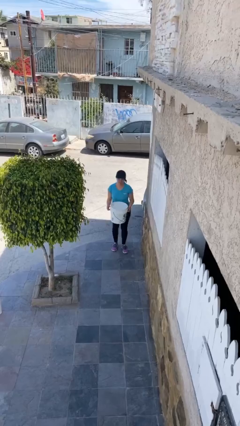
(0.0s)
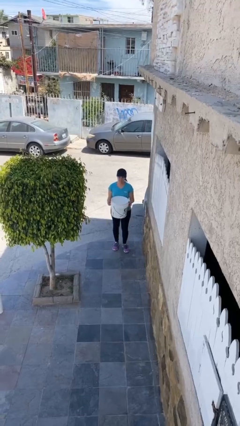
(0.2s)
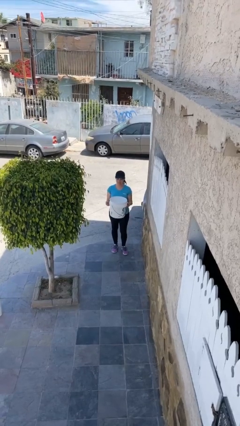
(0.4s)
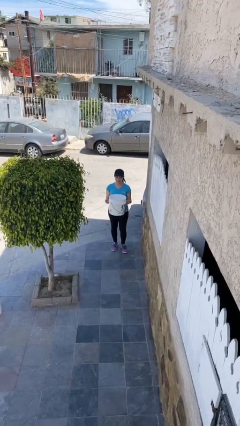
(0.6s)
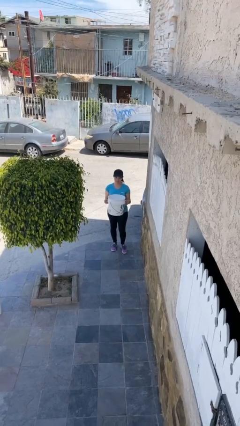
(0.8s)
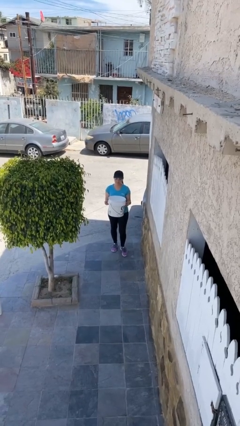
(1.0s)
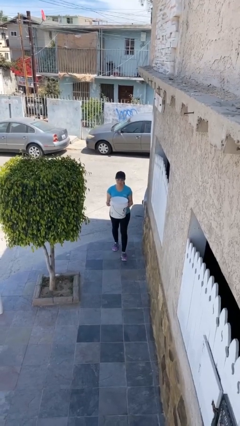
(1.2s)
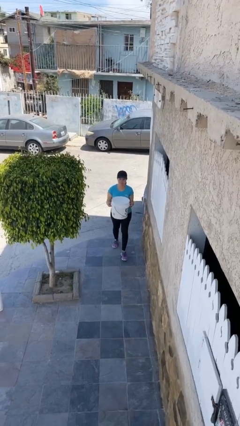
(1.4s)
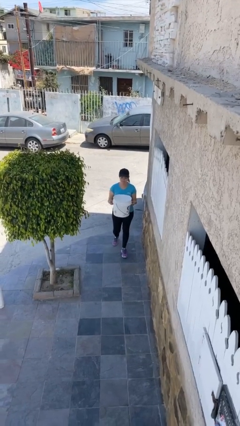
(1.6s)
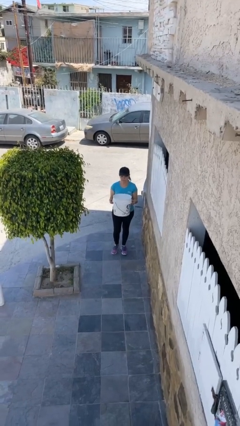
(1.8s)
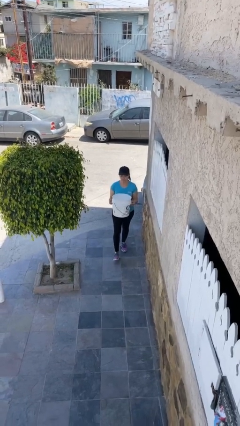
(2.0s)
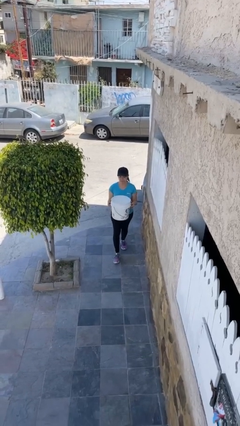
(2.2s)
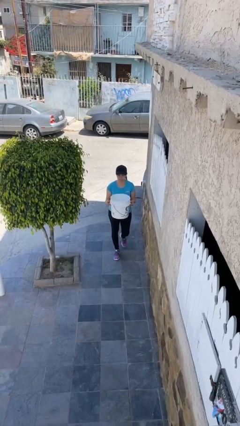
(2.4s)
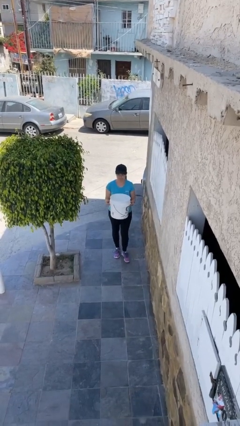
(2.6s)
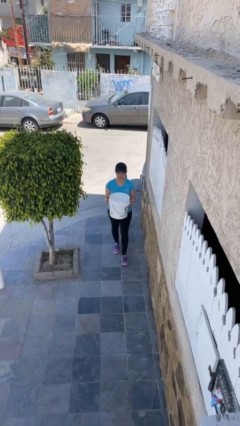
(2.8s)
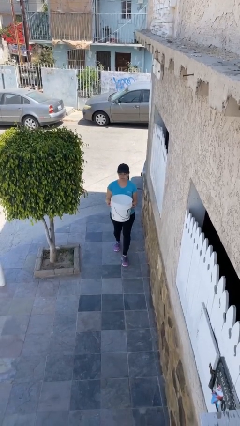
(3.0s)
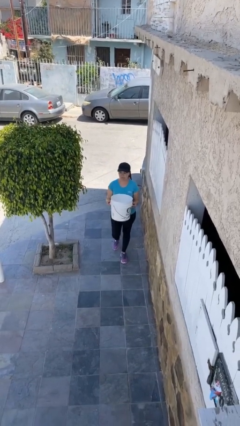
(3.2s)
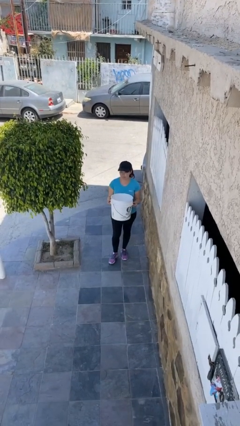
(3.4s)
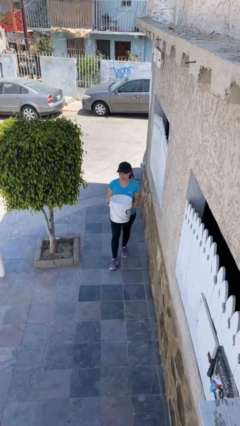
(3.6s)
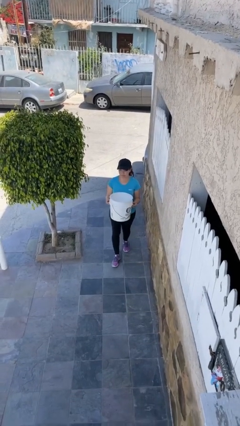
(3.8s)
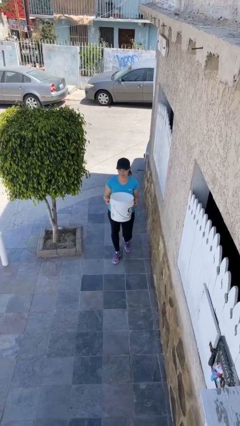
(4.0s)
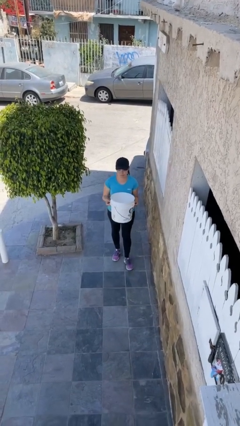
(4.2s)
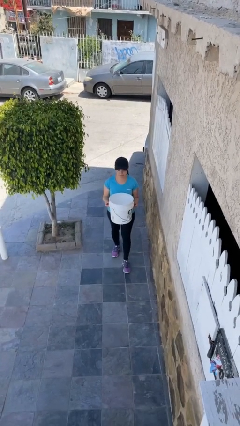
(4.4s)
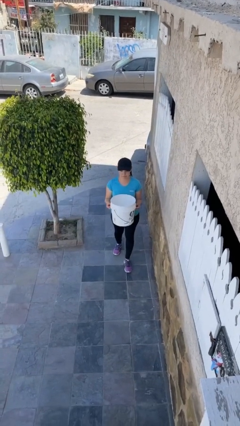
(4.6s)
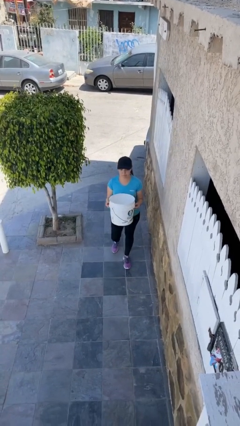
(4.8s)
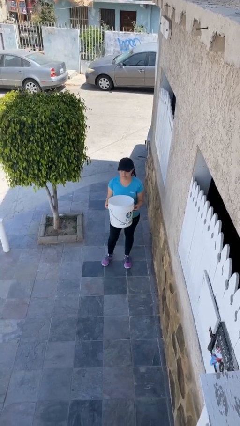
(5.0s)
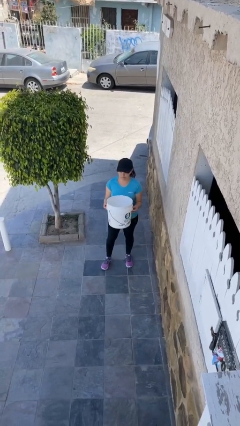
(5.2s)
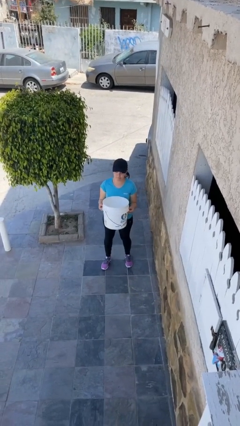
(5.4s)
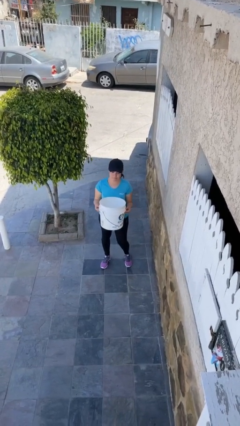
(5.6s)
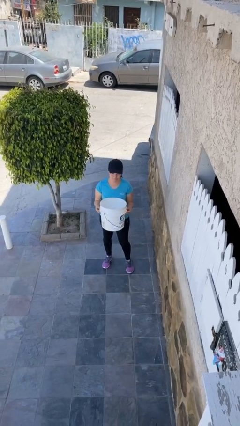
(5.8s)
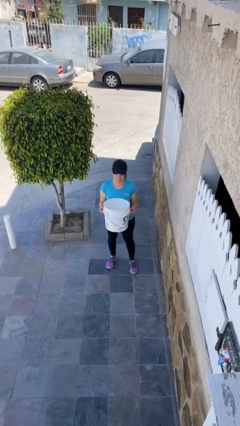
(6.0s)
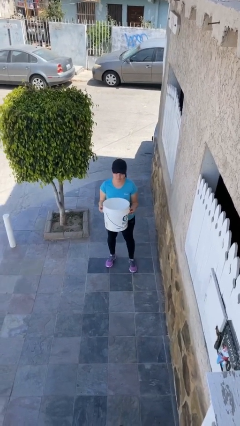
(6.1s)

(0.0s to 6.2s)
person carries heavy object

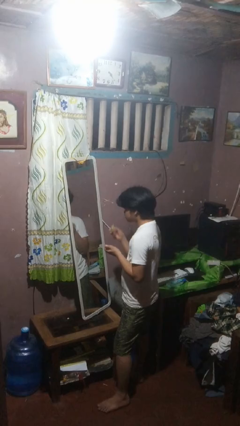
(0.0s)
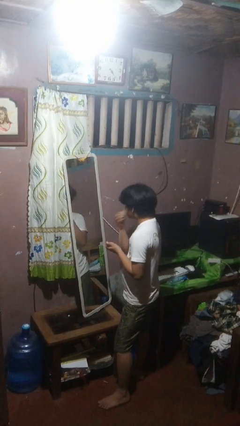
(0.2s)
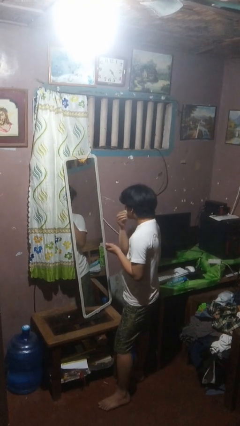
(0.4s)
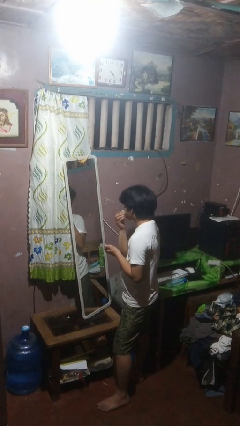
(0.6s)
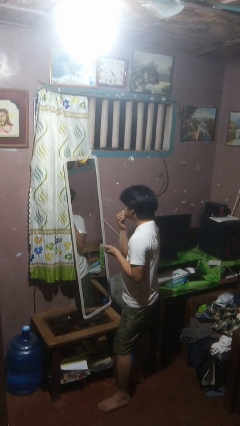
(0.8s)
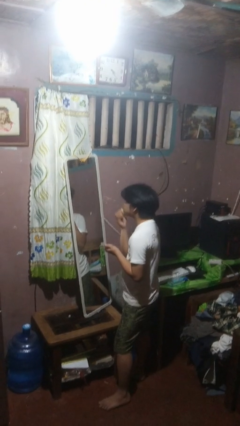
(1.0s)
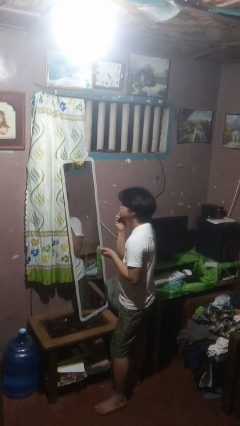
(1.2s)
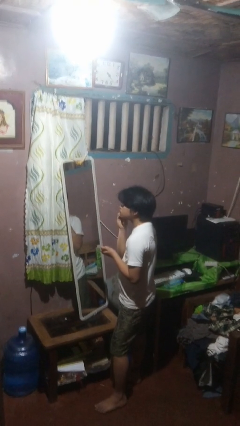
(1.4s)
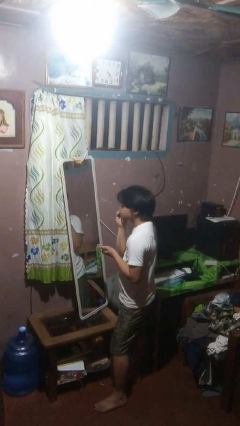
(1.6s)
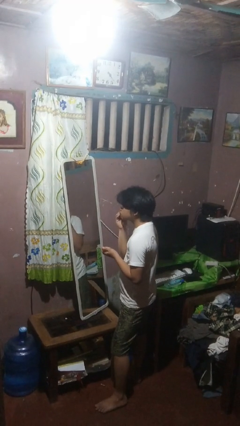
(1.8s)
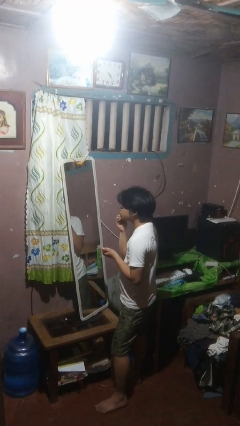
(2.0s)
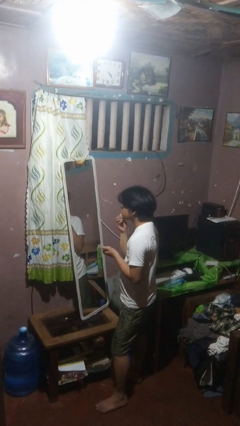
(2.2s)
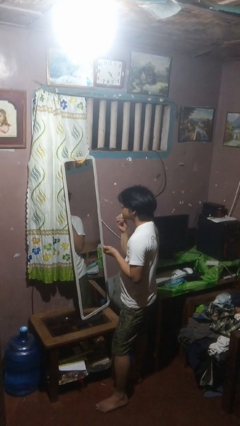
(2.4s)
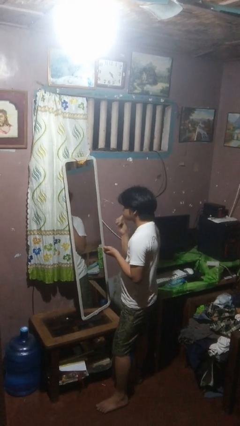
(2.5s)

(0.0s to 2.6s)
person applies foundation makeup

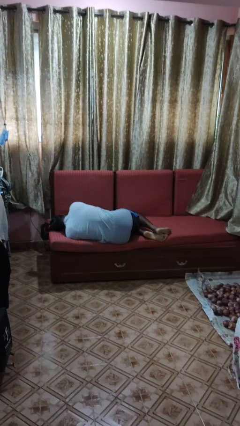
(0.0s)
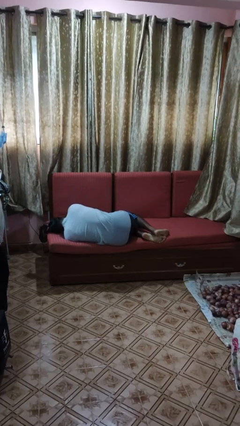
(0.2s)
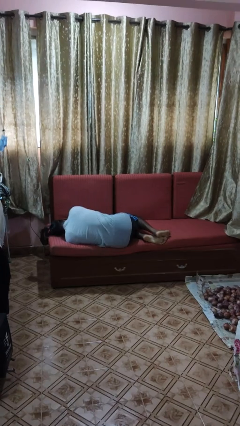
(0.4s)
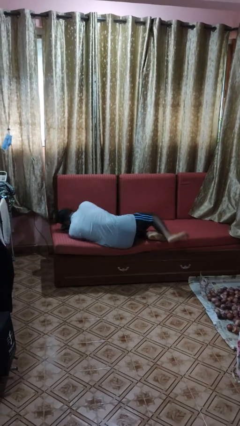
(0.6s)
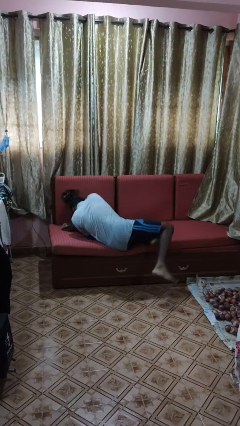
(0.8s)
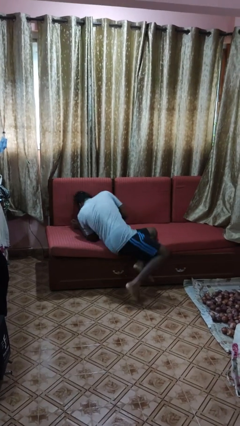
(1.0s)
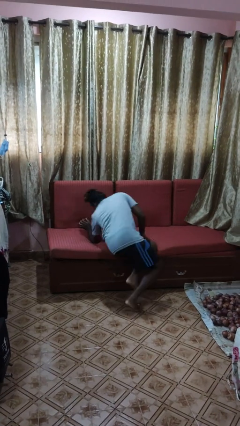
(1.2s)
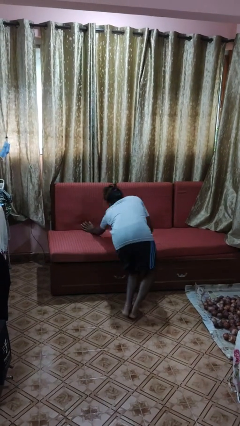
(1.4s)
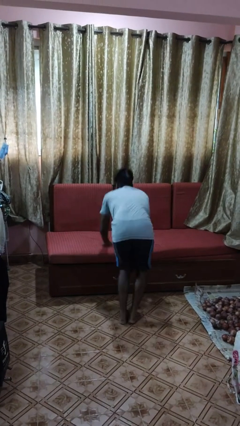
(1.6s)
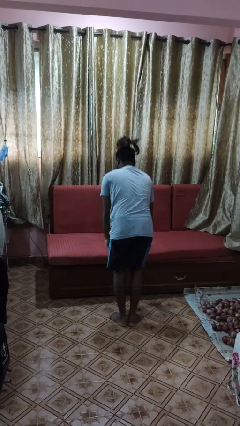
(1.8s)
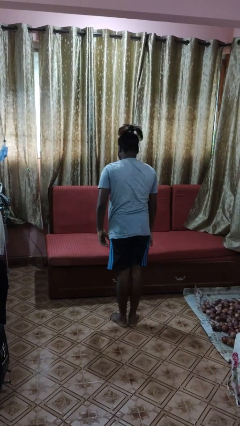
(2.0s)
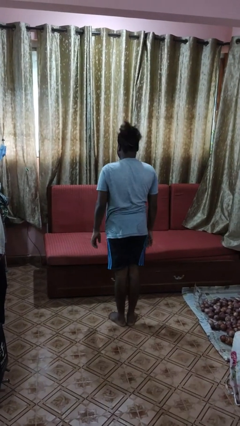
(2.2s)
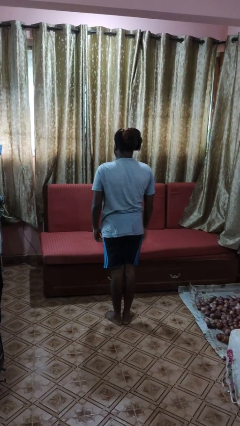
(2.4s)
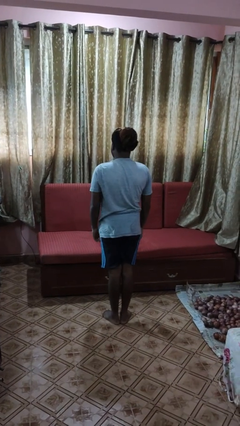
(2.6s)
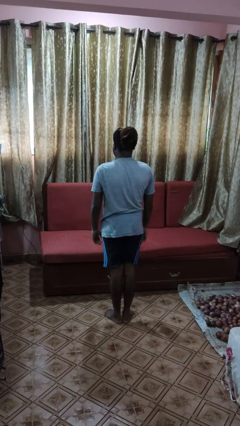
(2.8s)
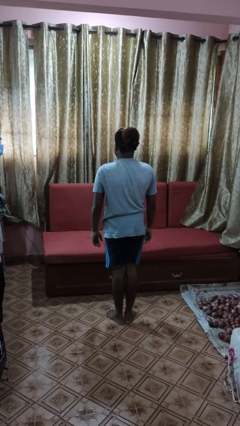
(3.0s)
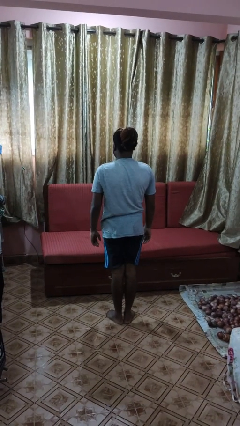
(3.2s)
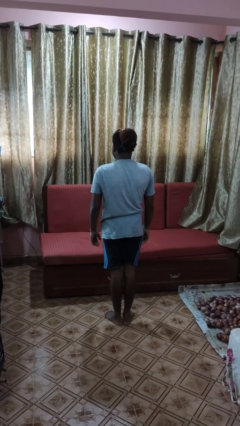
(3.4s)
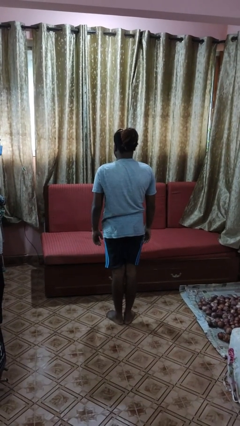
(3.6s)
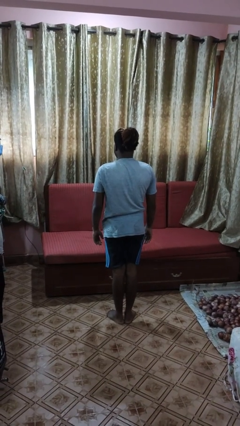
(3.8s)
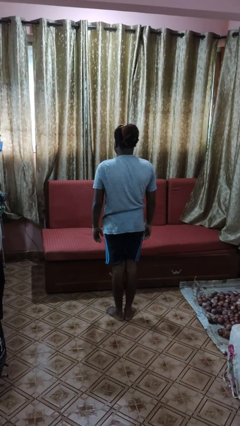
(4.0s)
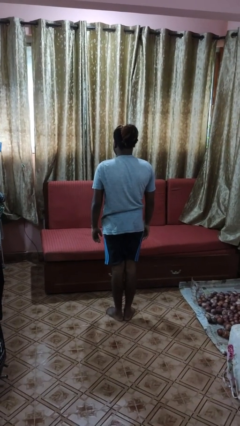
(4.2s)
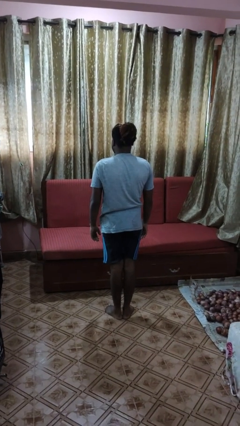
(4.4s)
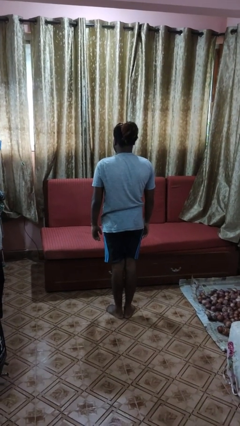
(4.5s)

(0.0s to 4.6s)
person stands up

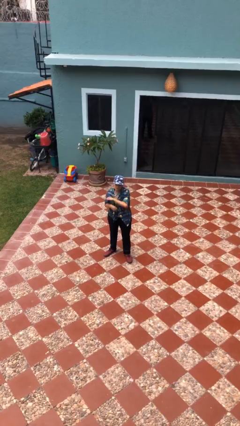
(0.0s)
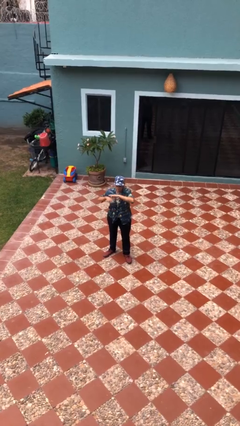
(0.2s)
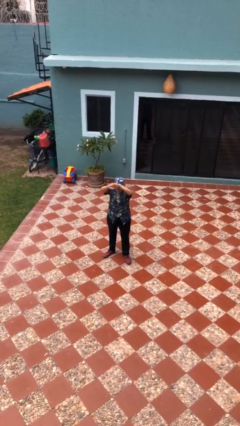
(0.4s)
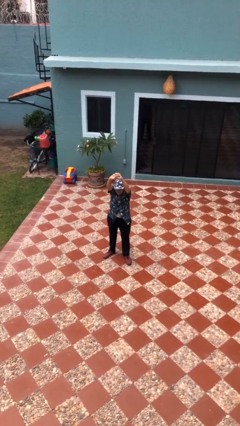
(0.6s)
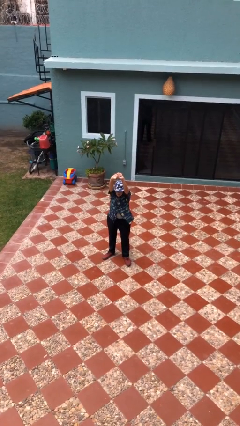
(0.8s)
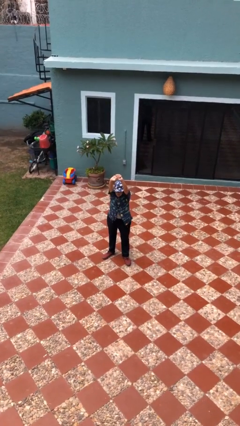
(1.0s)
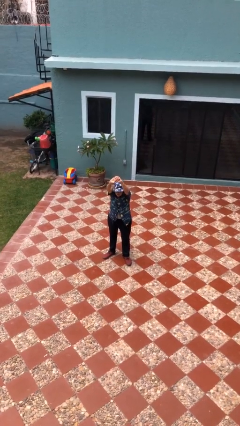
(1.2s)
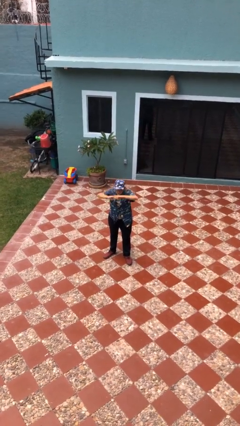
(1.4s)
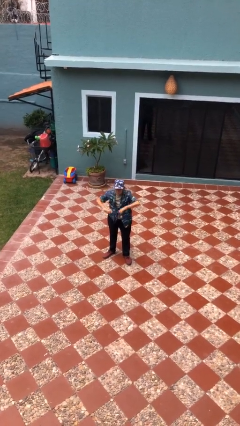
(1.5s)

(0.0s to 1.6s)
person stretches arms over head

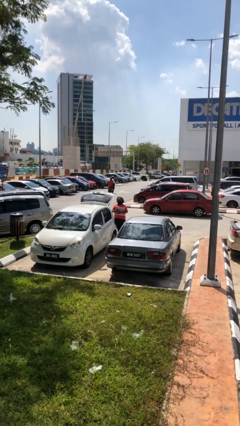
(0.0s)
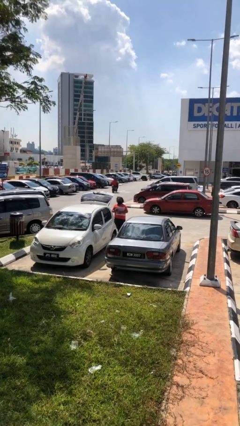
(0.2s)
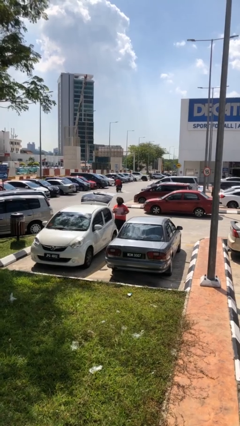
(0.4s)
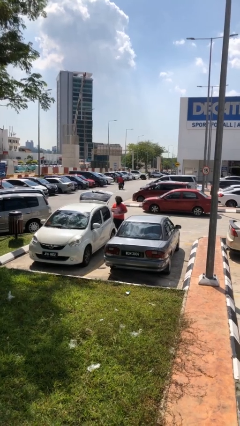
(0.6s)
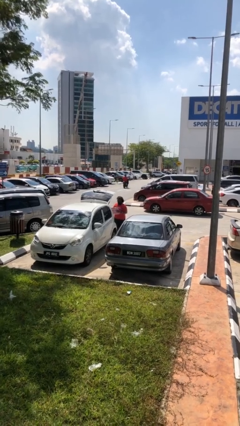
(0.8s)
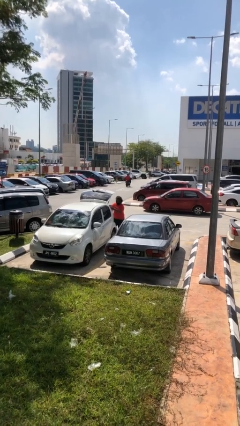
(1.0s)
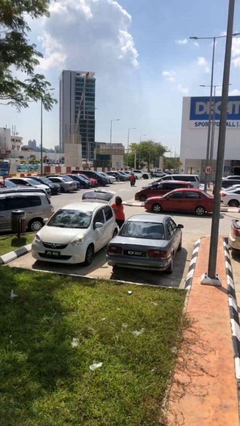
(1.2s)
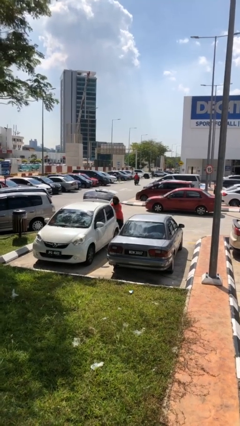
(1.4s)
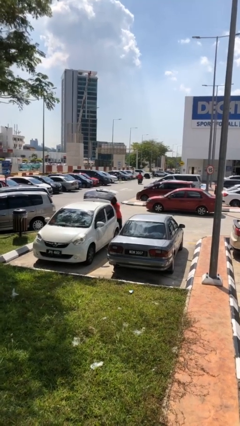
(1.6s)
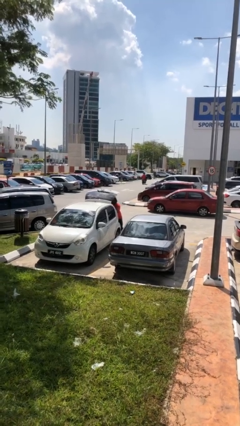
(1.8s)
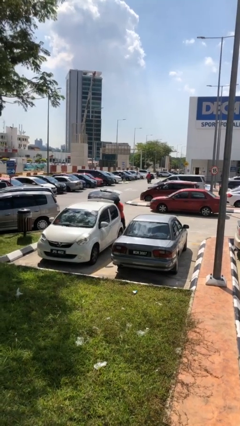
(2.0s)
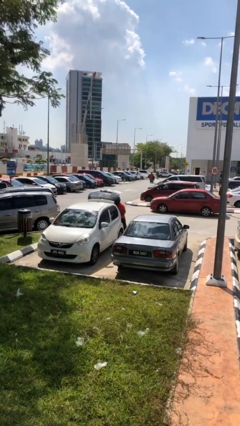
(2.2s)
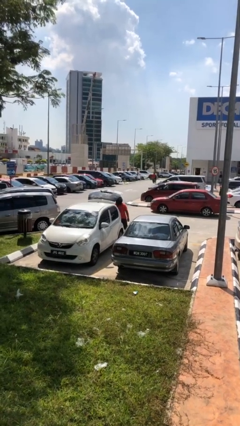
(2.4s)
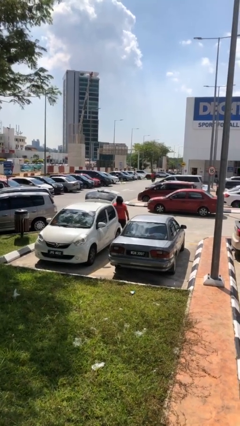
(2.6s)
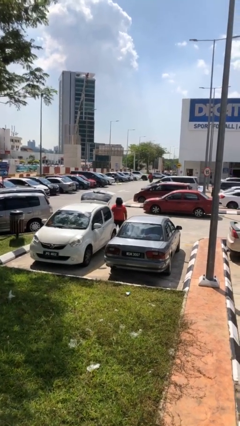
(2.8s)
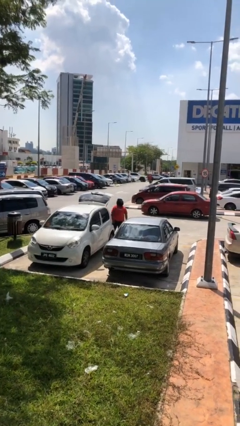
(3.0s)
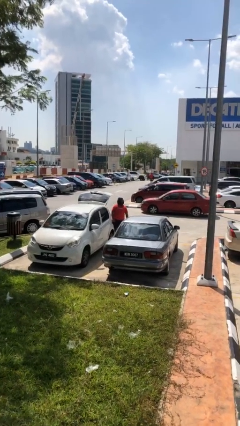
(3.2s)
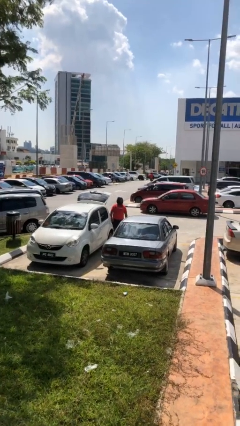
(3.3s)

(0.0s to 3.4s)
person loads car
